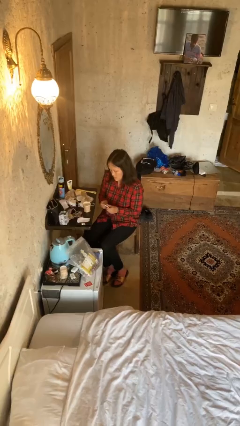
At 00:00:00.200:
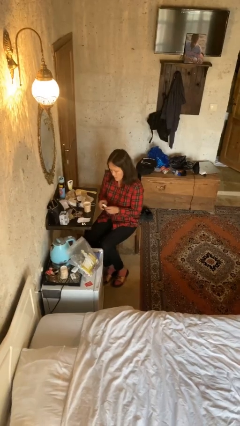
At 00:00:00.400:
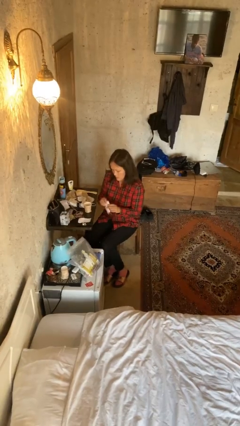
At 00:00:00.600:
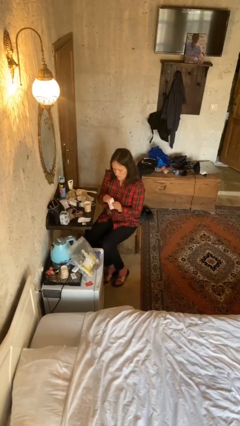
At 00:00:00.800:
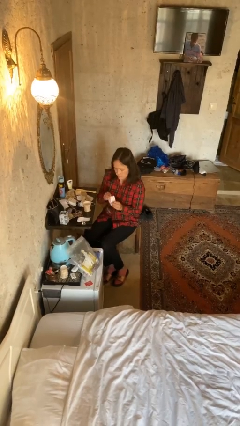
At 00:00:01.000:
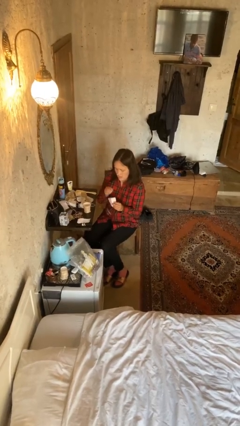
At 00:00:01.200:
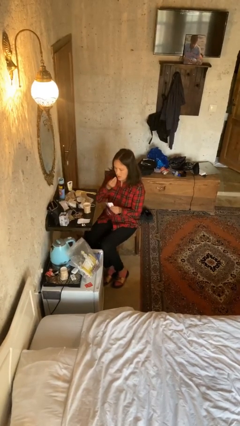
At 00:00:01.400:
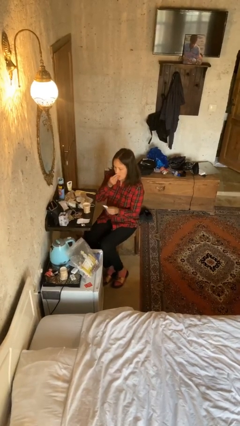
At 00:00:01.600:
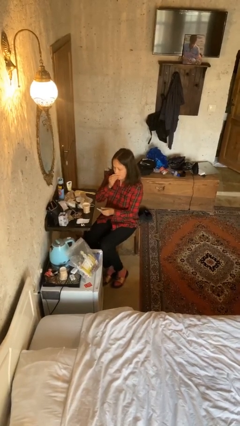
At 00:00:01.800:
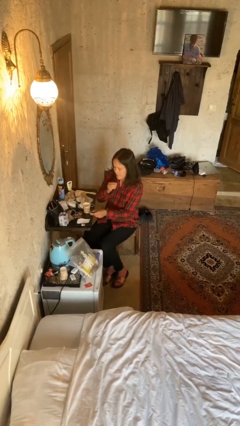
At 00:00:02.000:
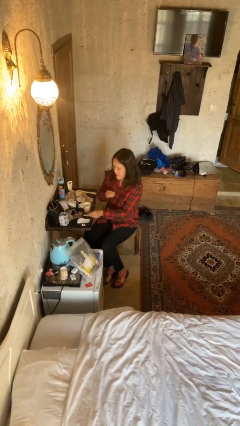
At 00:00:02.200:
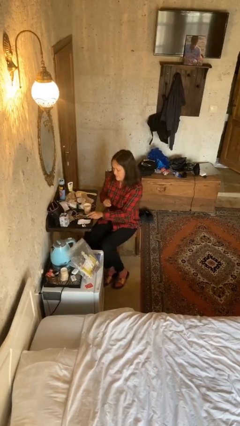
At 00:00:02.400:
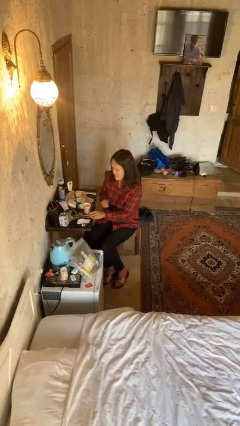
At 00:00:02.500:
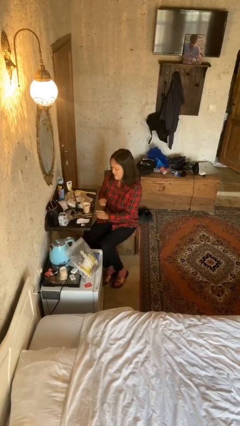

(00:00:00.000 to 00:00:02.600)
person takes medicine pills

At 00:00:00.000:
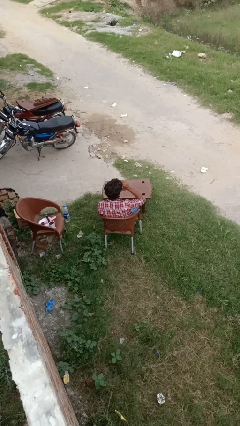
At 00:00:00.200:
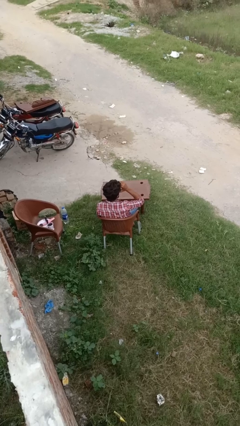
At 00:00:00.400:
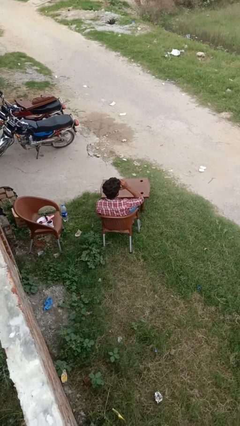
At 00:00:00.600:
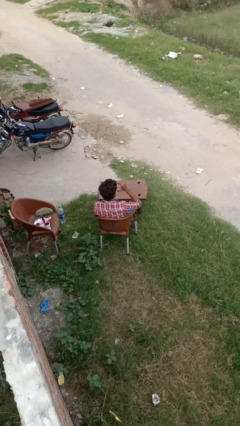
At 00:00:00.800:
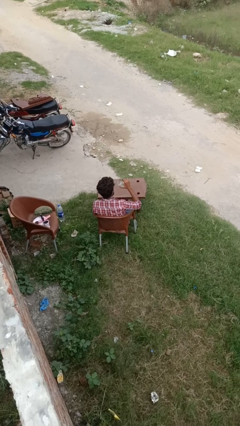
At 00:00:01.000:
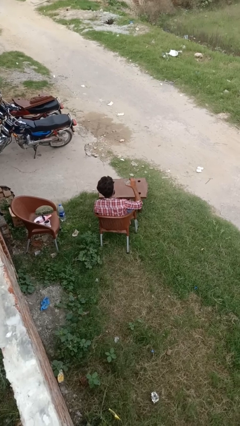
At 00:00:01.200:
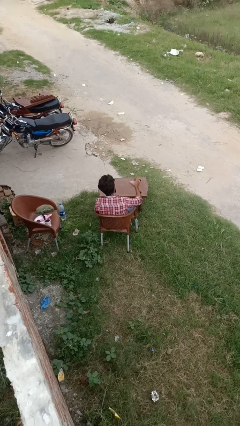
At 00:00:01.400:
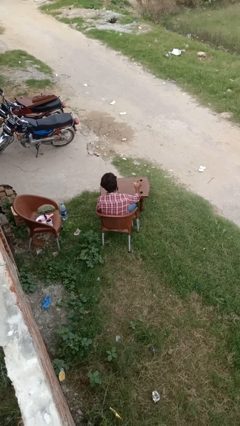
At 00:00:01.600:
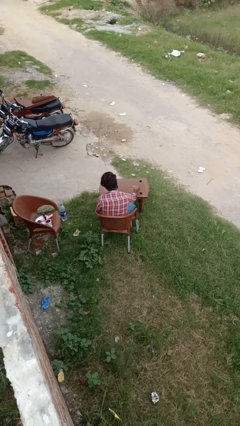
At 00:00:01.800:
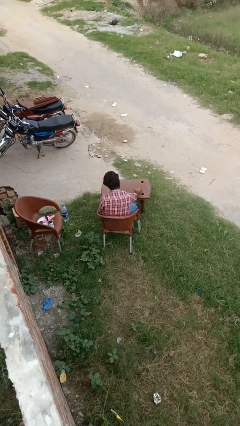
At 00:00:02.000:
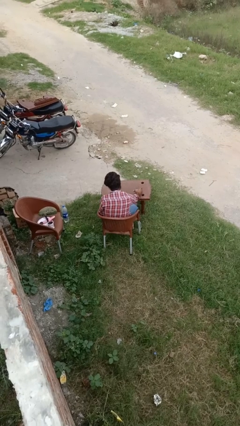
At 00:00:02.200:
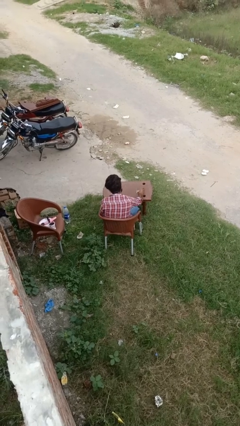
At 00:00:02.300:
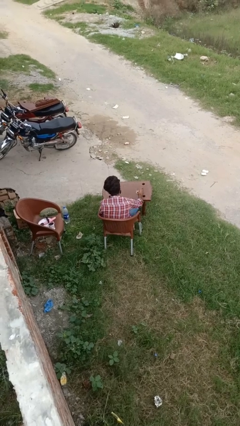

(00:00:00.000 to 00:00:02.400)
person puts down object on table

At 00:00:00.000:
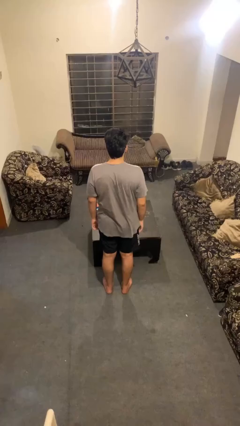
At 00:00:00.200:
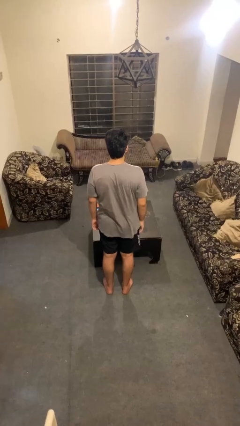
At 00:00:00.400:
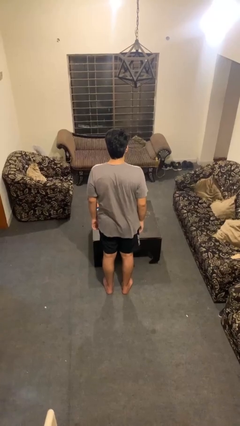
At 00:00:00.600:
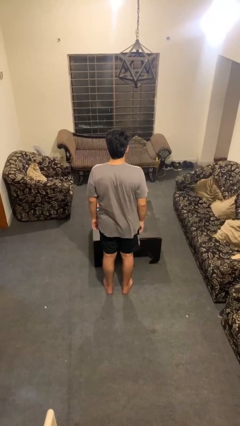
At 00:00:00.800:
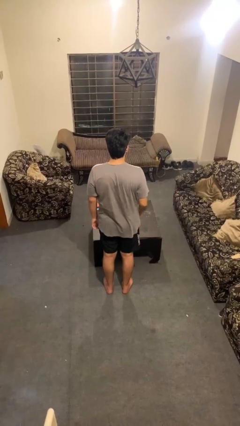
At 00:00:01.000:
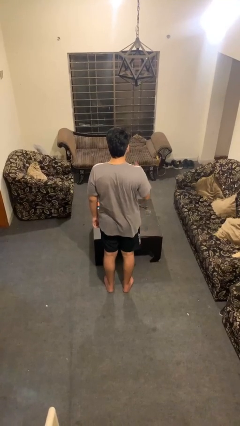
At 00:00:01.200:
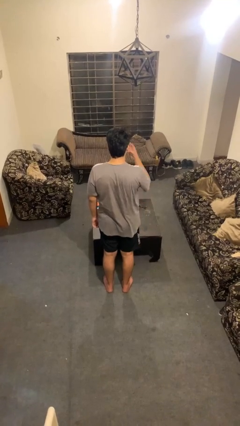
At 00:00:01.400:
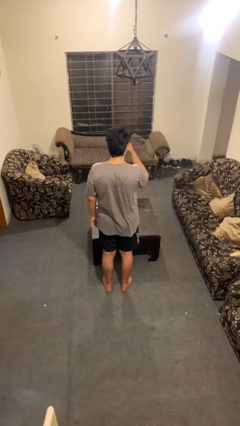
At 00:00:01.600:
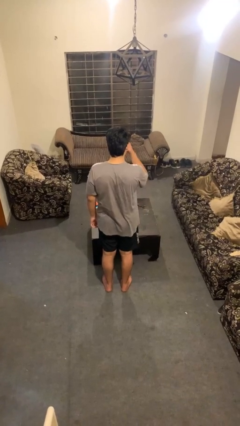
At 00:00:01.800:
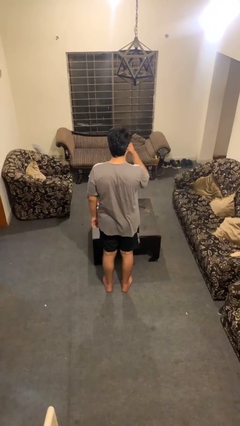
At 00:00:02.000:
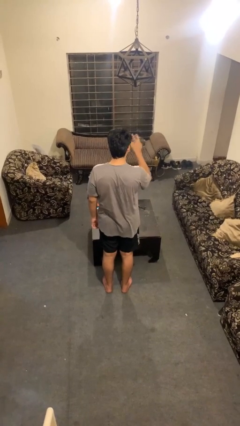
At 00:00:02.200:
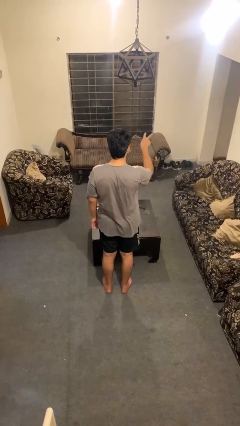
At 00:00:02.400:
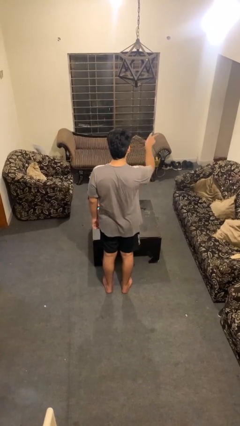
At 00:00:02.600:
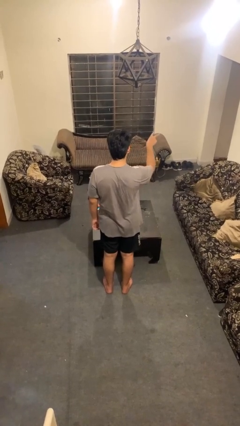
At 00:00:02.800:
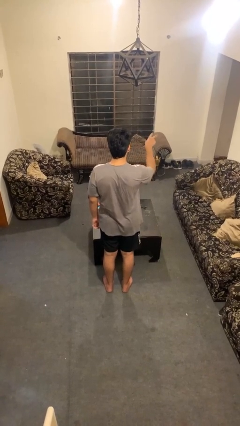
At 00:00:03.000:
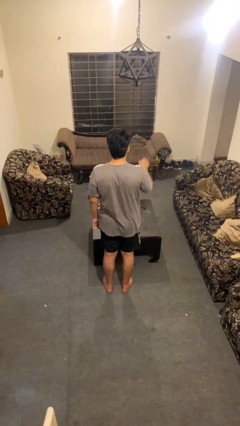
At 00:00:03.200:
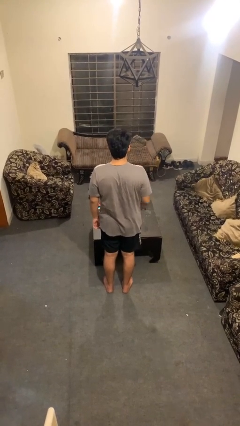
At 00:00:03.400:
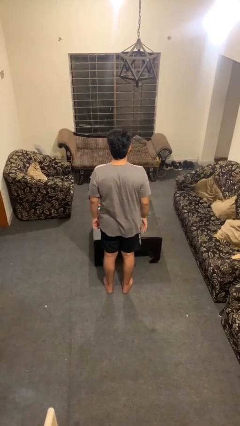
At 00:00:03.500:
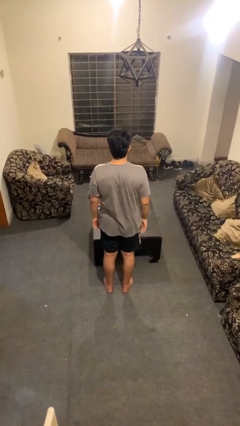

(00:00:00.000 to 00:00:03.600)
person gestures watch closely

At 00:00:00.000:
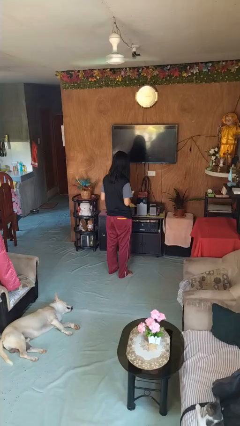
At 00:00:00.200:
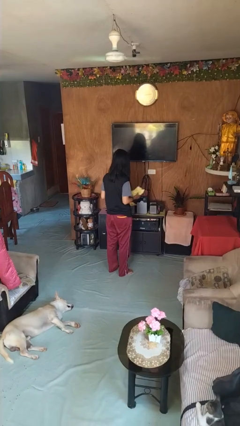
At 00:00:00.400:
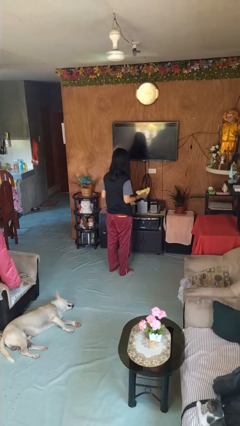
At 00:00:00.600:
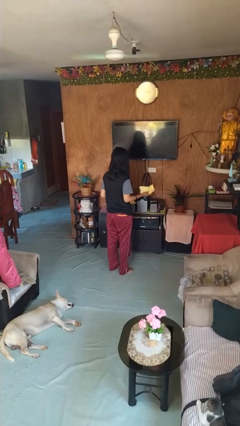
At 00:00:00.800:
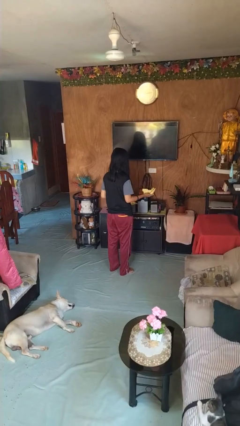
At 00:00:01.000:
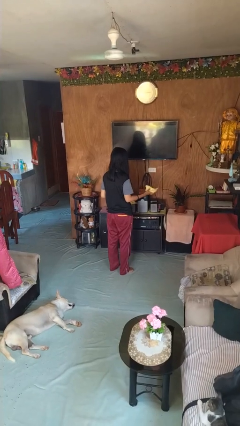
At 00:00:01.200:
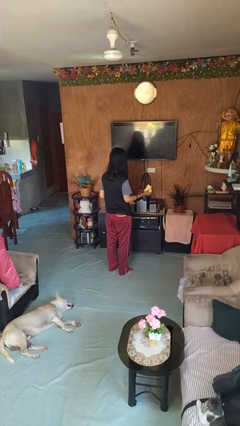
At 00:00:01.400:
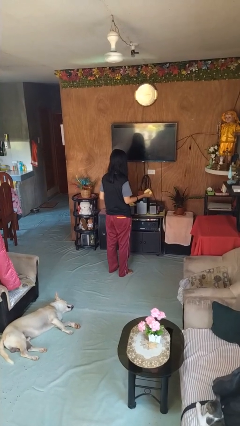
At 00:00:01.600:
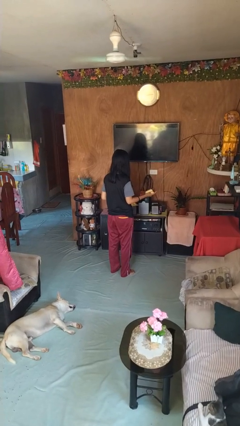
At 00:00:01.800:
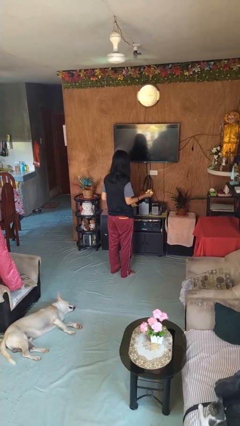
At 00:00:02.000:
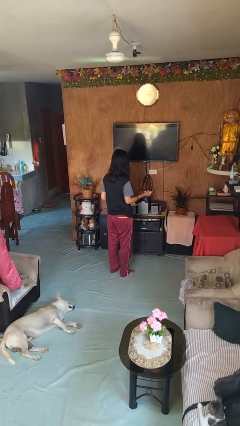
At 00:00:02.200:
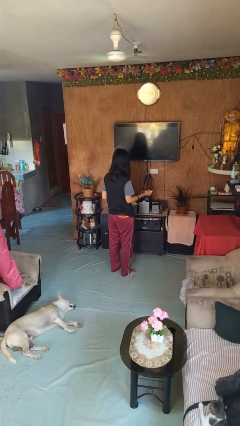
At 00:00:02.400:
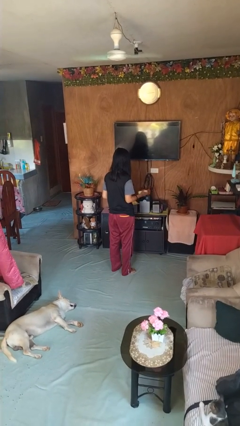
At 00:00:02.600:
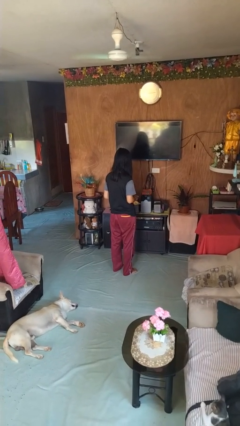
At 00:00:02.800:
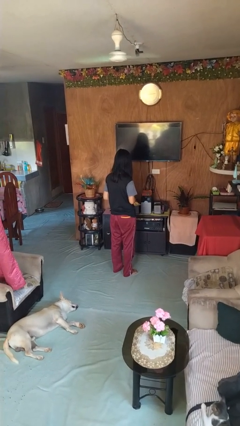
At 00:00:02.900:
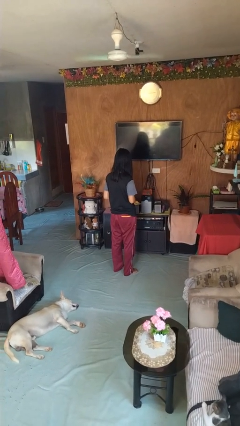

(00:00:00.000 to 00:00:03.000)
person crumples paper

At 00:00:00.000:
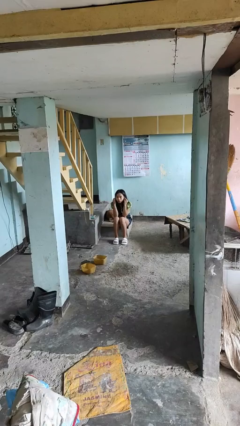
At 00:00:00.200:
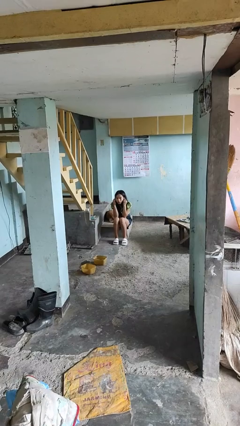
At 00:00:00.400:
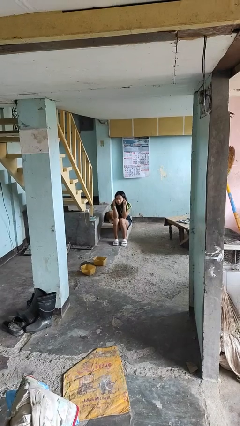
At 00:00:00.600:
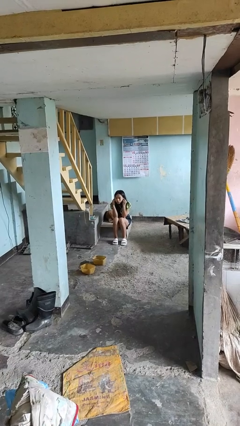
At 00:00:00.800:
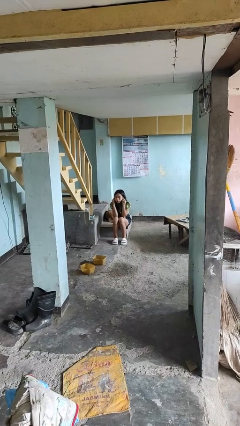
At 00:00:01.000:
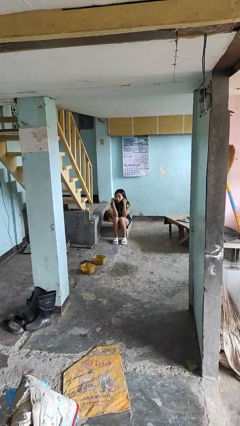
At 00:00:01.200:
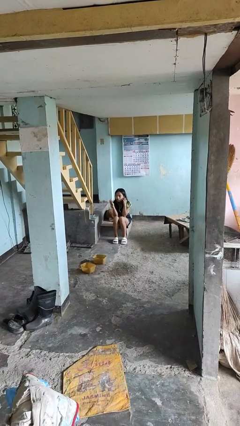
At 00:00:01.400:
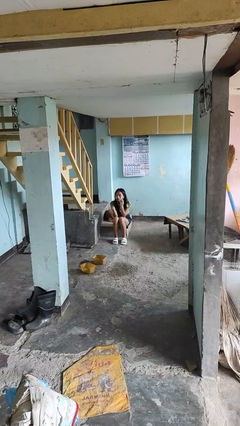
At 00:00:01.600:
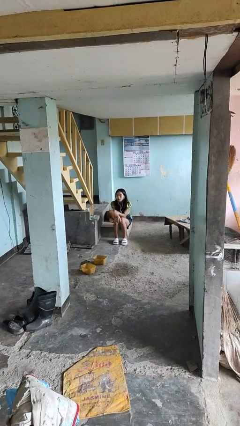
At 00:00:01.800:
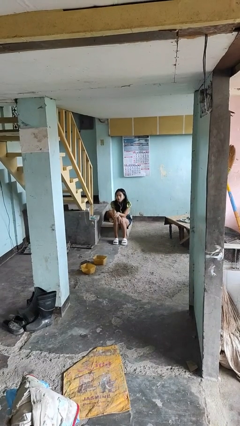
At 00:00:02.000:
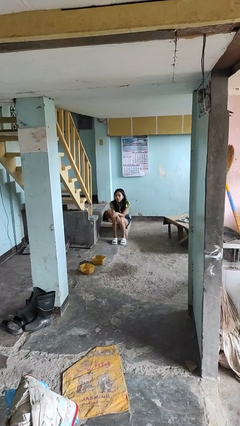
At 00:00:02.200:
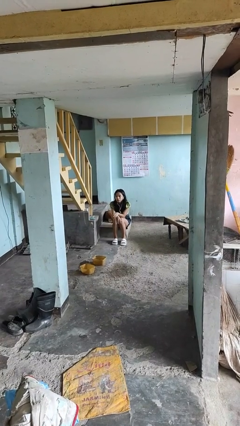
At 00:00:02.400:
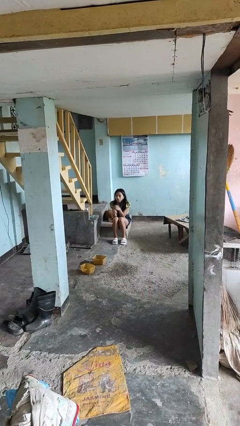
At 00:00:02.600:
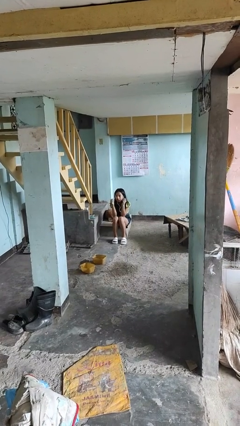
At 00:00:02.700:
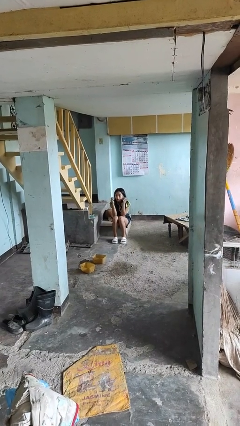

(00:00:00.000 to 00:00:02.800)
person puts on headphones

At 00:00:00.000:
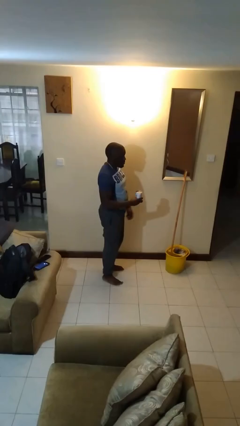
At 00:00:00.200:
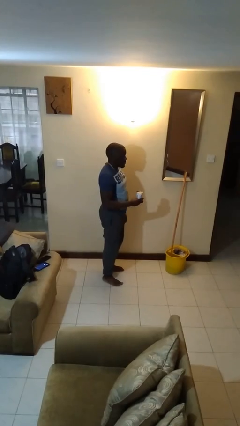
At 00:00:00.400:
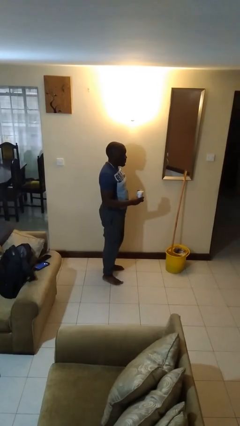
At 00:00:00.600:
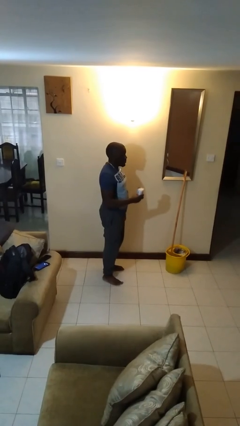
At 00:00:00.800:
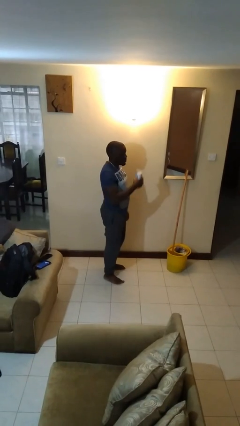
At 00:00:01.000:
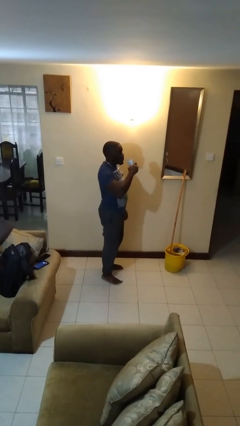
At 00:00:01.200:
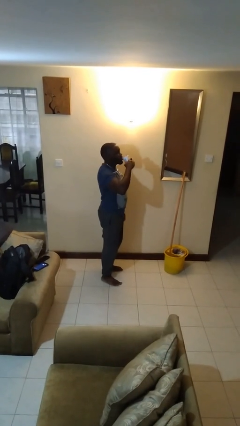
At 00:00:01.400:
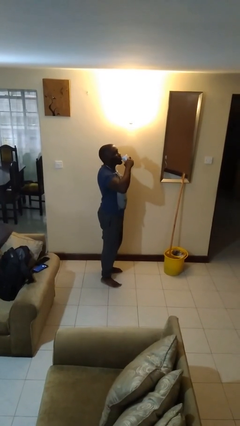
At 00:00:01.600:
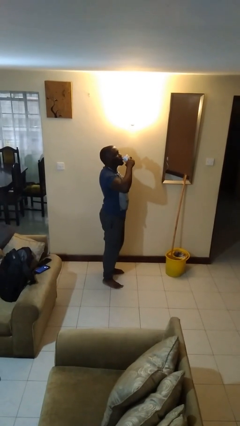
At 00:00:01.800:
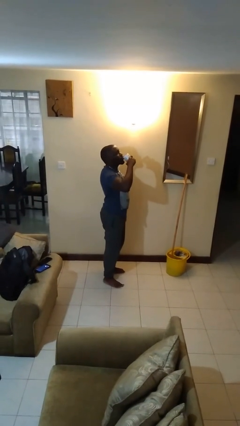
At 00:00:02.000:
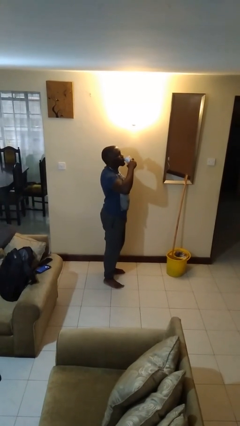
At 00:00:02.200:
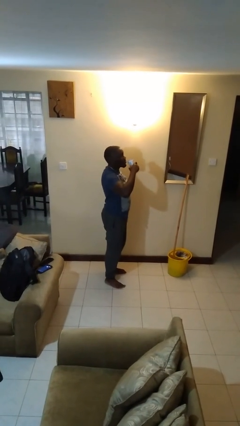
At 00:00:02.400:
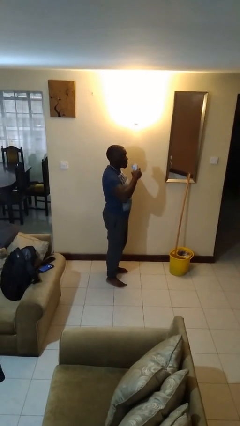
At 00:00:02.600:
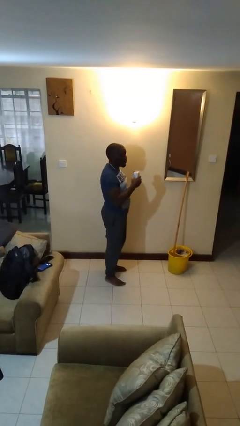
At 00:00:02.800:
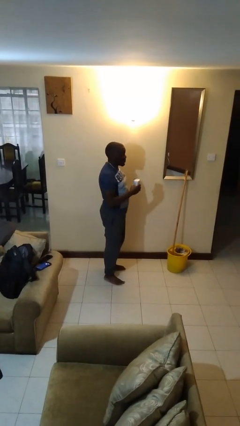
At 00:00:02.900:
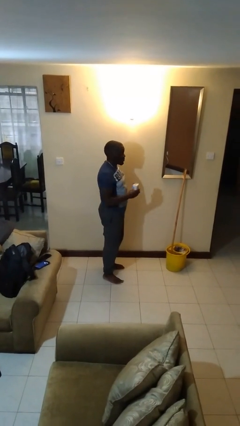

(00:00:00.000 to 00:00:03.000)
person drinks from beverage can
